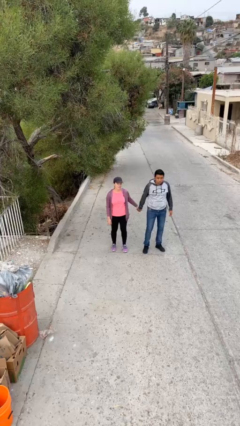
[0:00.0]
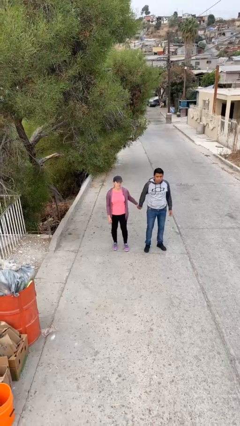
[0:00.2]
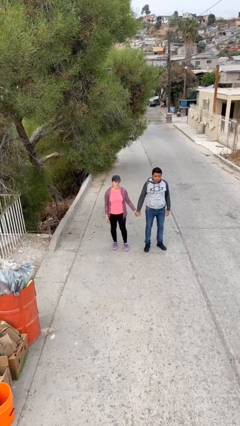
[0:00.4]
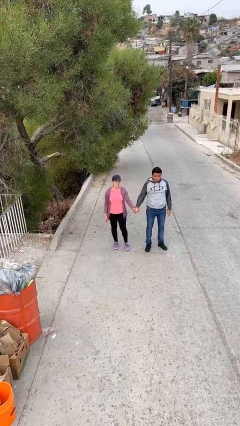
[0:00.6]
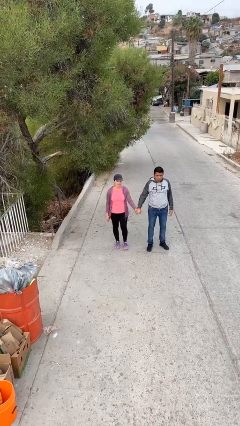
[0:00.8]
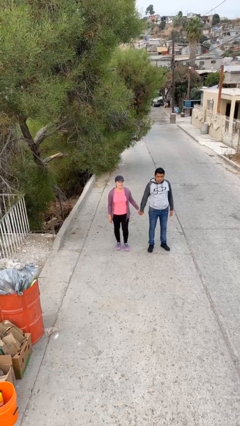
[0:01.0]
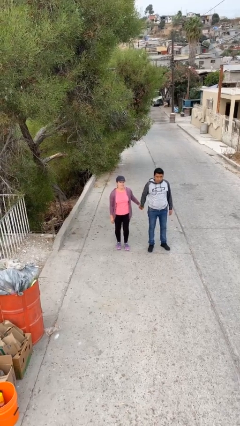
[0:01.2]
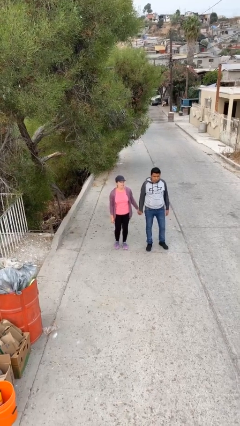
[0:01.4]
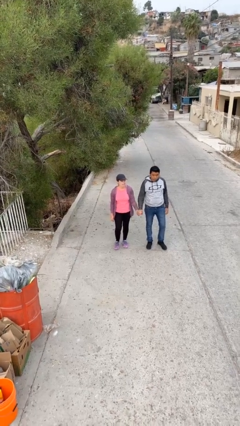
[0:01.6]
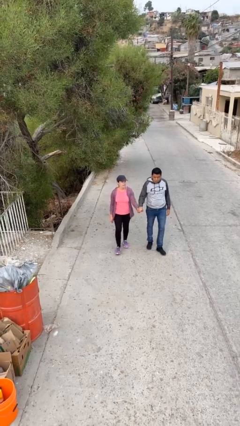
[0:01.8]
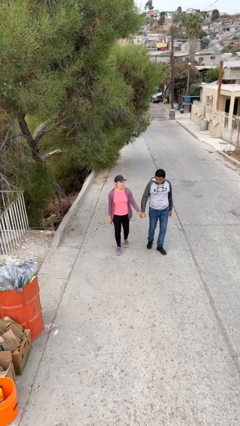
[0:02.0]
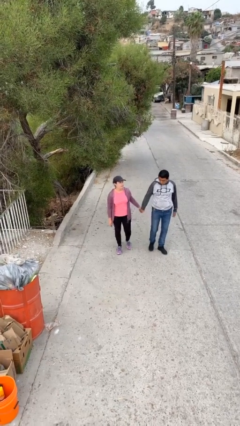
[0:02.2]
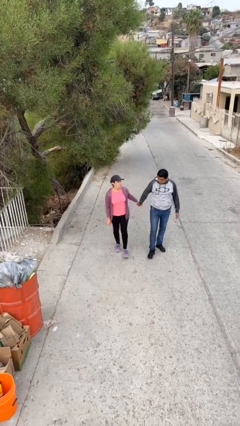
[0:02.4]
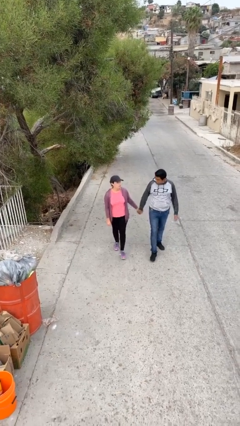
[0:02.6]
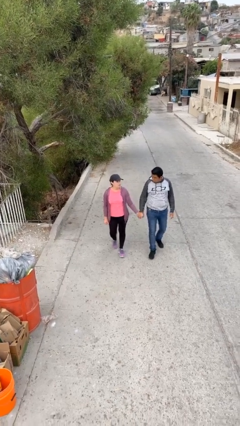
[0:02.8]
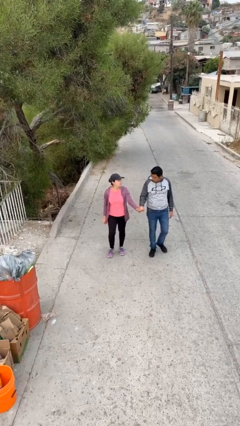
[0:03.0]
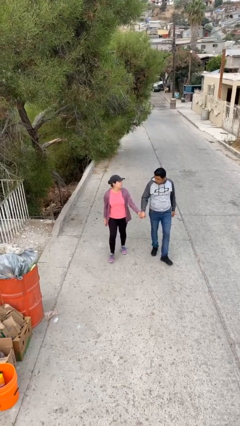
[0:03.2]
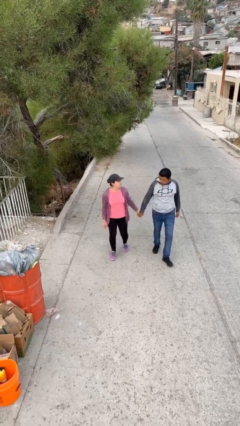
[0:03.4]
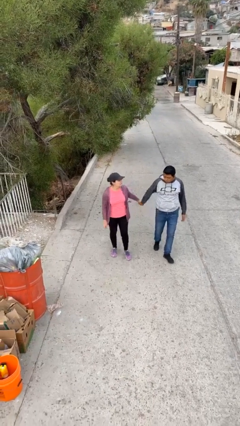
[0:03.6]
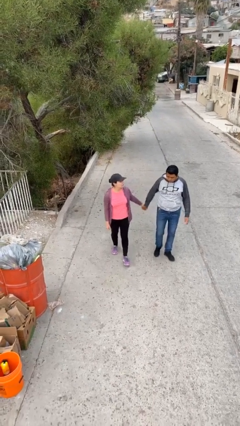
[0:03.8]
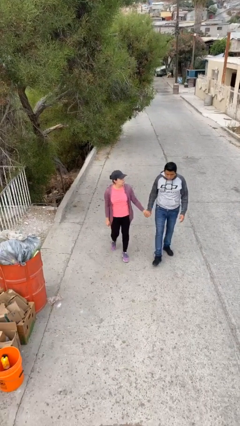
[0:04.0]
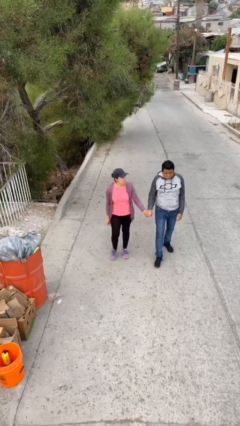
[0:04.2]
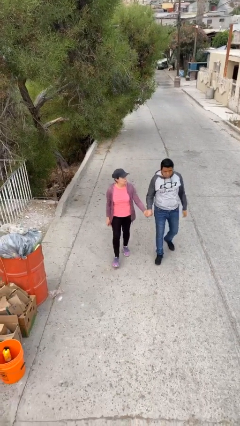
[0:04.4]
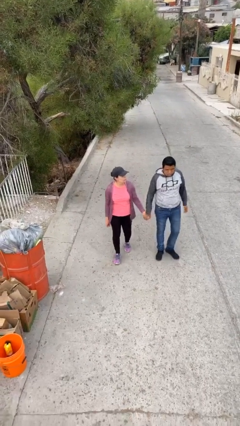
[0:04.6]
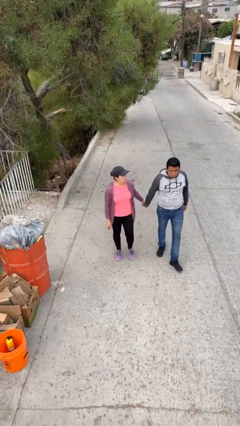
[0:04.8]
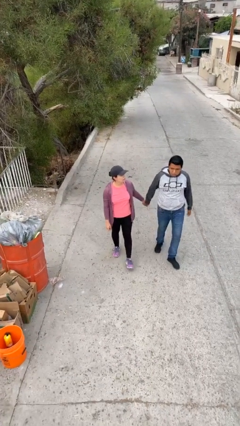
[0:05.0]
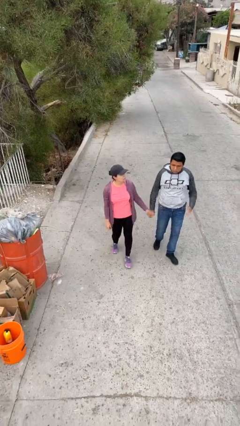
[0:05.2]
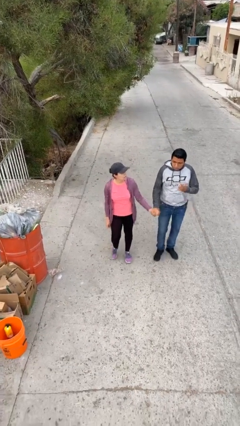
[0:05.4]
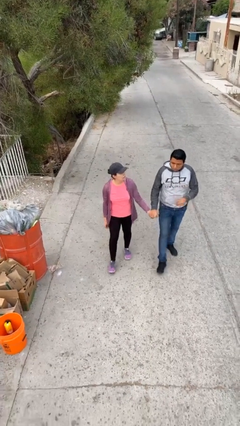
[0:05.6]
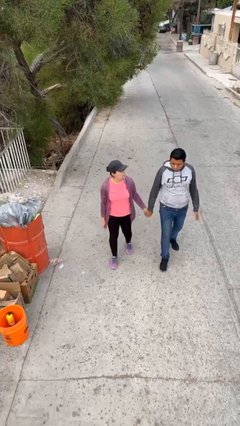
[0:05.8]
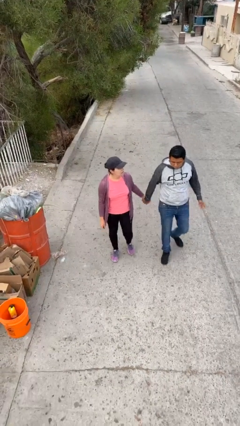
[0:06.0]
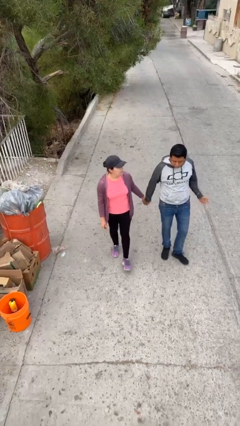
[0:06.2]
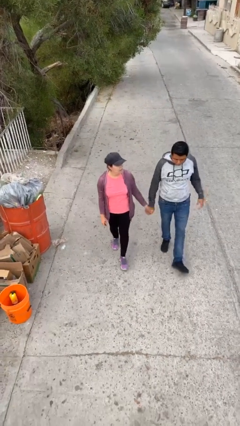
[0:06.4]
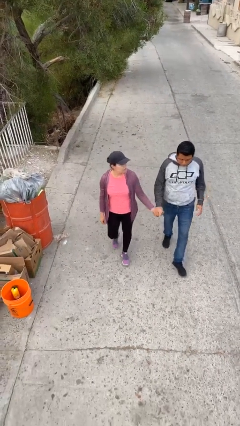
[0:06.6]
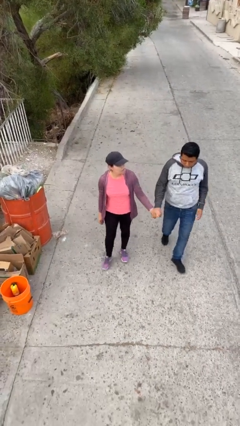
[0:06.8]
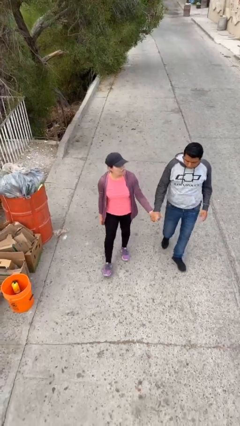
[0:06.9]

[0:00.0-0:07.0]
person holds hand

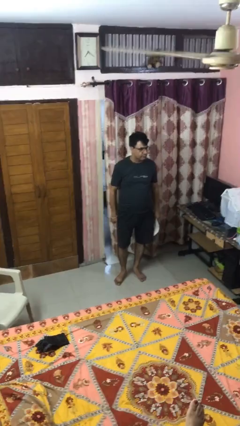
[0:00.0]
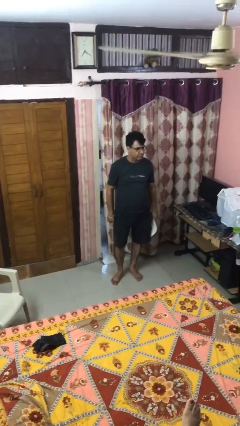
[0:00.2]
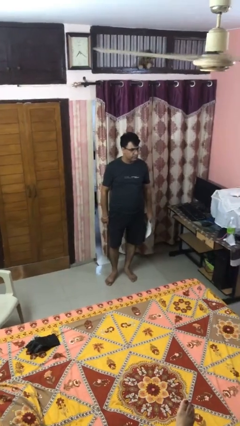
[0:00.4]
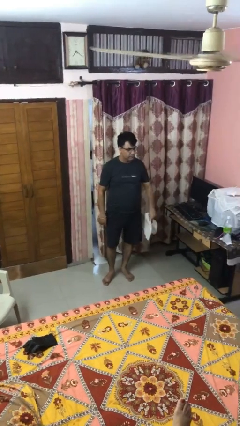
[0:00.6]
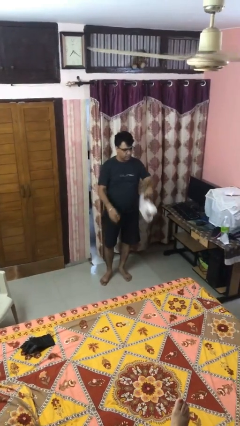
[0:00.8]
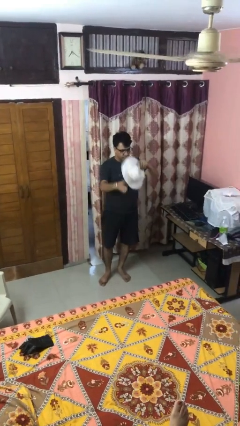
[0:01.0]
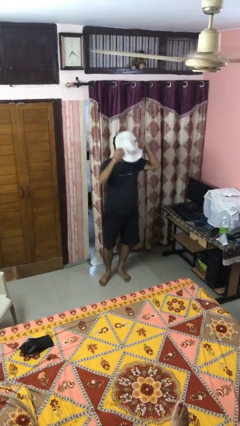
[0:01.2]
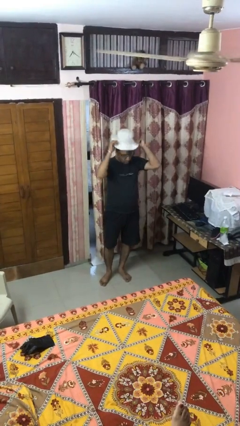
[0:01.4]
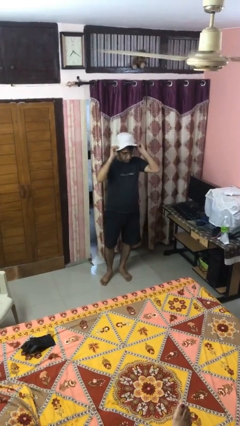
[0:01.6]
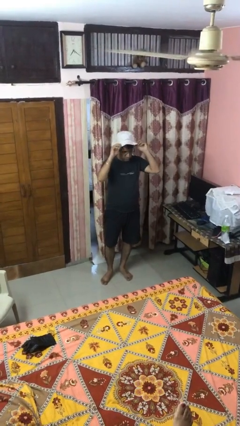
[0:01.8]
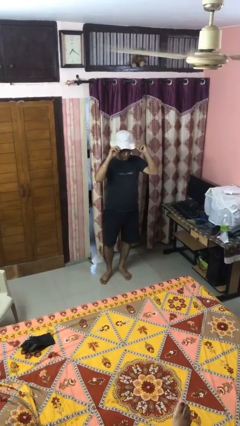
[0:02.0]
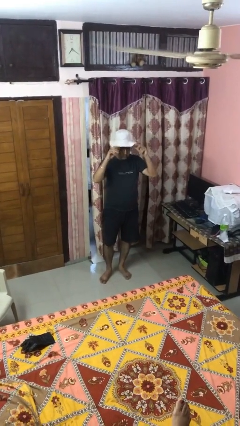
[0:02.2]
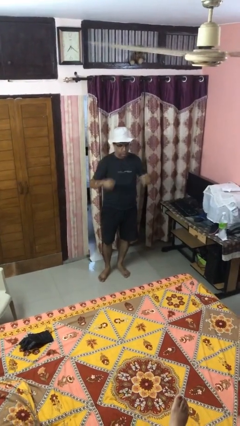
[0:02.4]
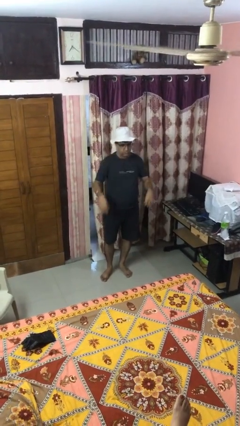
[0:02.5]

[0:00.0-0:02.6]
person puts on hat

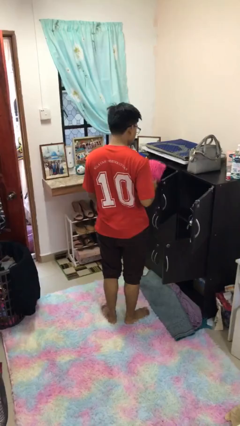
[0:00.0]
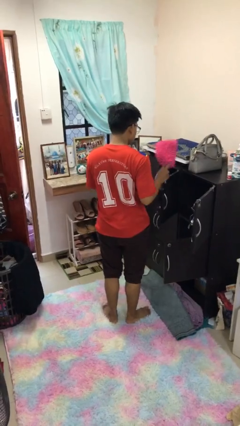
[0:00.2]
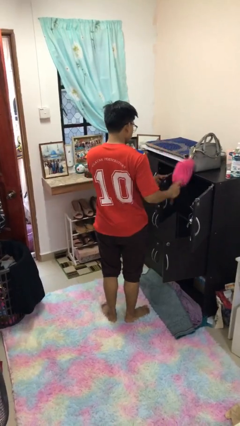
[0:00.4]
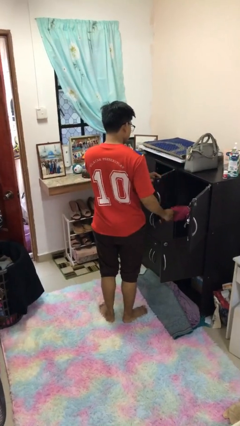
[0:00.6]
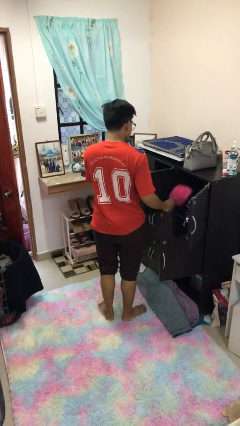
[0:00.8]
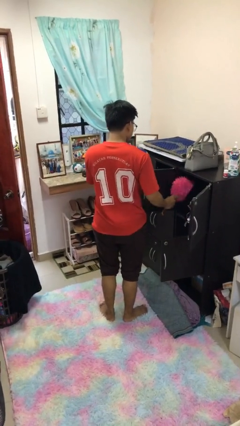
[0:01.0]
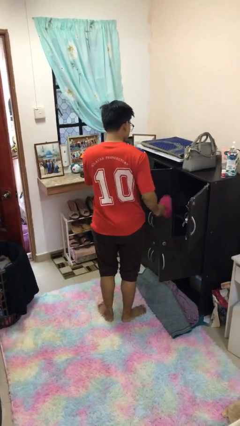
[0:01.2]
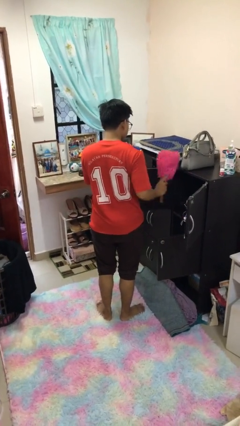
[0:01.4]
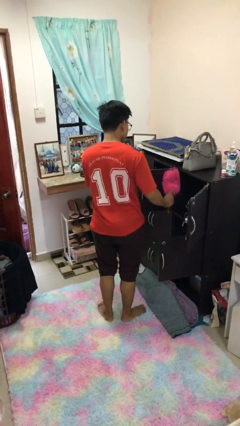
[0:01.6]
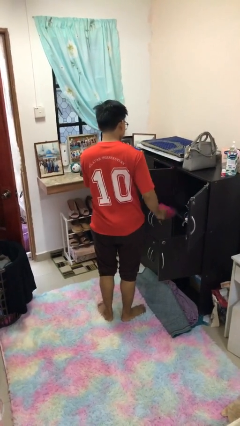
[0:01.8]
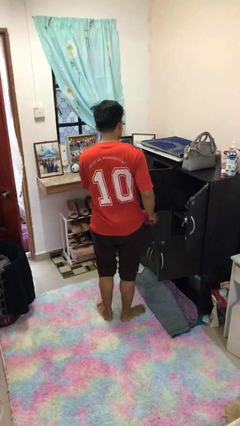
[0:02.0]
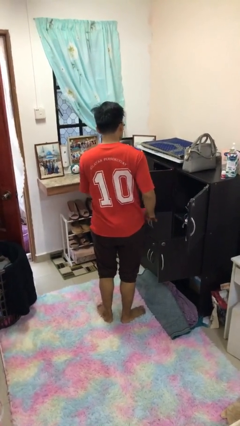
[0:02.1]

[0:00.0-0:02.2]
person dusts furniture

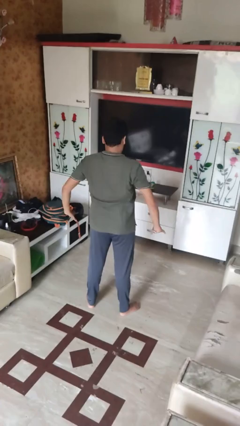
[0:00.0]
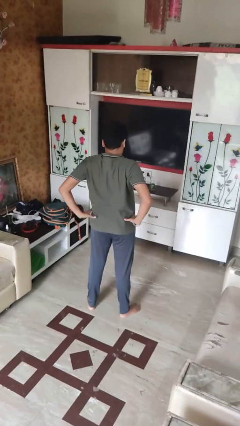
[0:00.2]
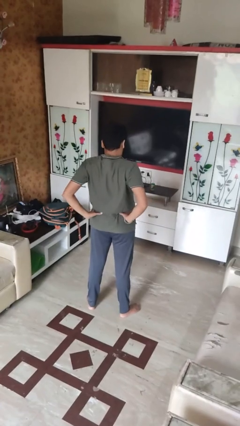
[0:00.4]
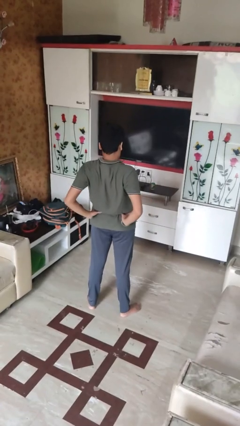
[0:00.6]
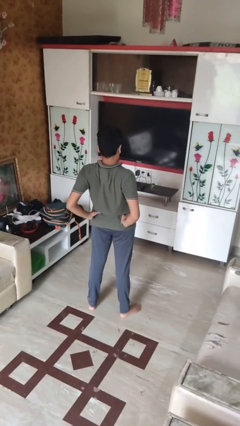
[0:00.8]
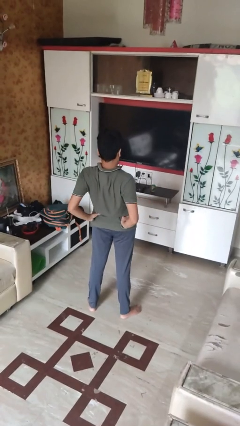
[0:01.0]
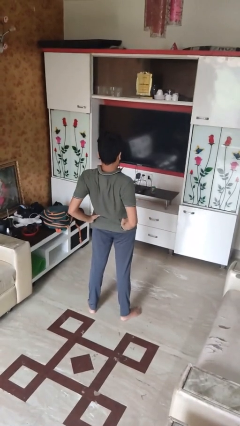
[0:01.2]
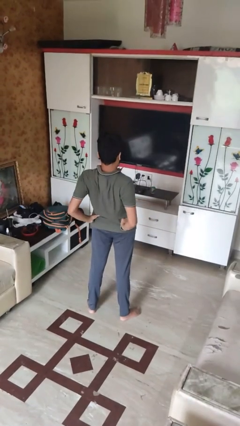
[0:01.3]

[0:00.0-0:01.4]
person stretches back

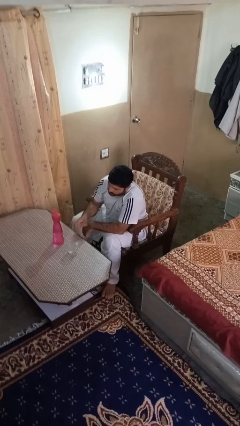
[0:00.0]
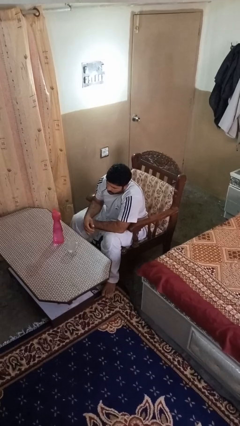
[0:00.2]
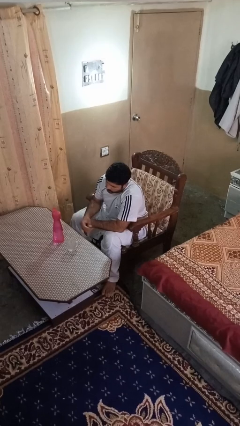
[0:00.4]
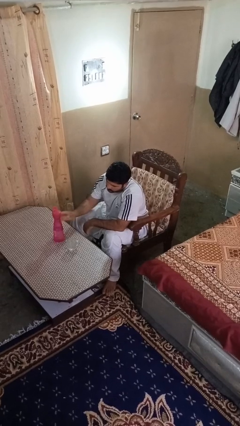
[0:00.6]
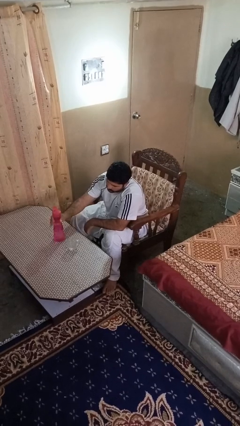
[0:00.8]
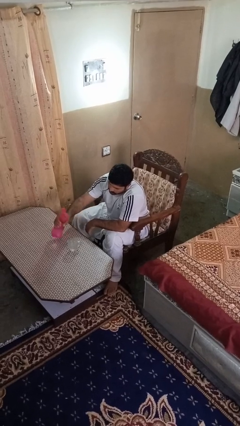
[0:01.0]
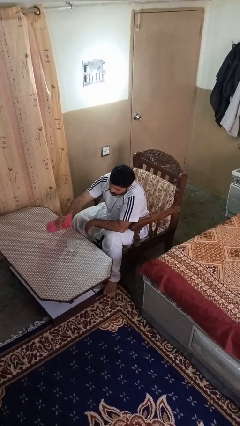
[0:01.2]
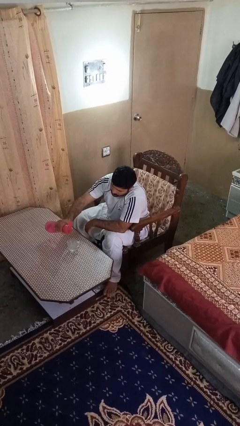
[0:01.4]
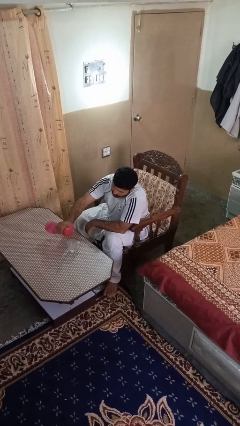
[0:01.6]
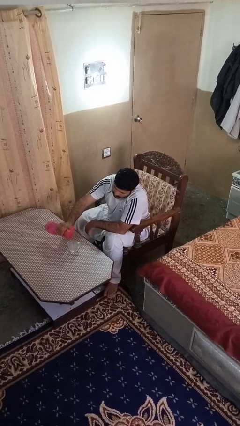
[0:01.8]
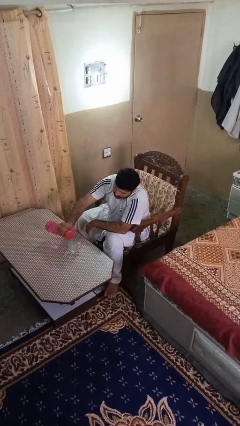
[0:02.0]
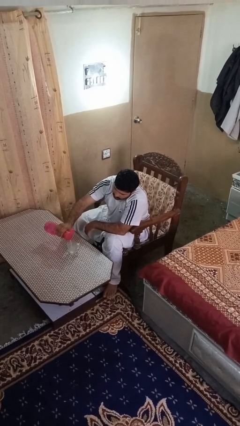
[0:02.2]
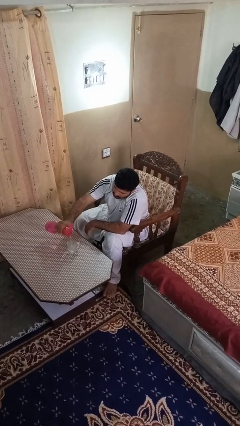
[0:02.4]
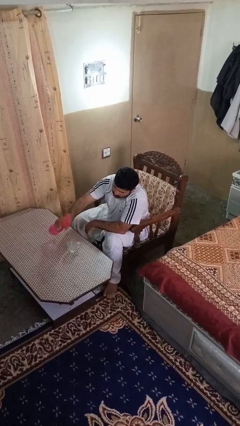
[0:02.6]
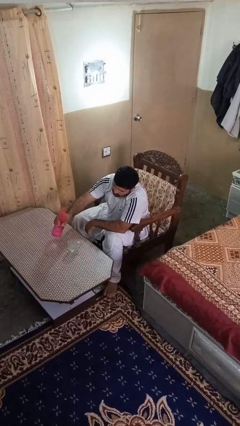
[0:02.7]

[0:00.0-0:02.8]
person pours liquid into cup

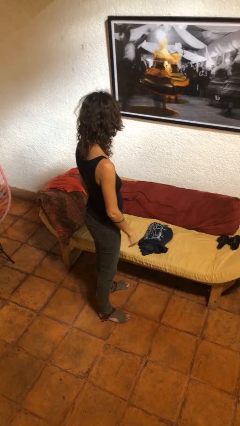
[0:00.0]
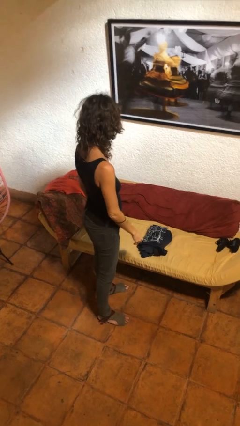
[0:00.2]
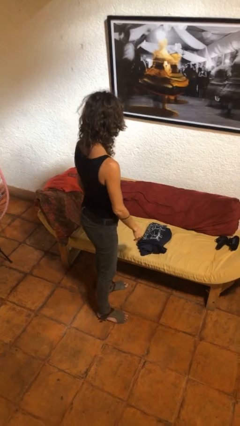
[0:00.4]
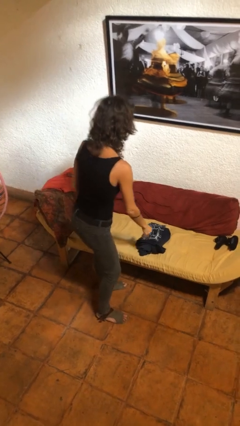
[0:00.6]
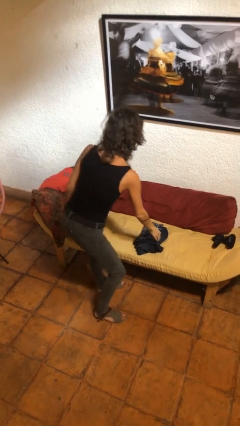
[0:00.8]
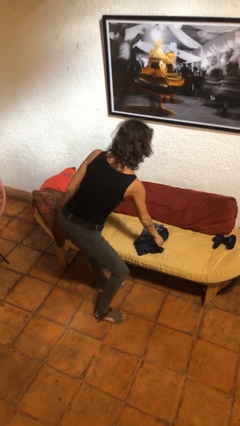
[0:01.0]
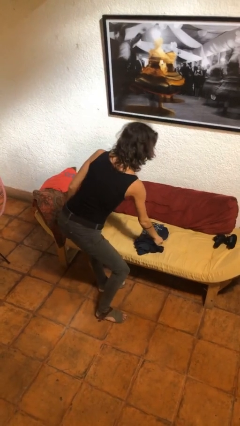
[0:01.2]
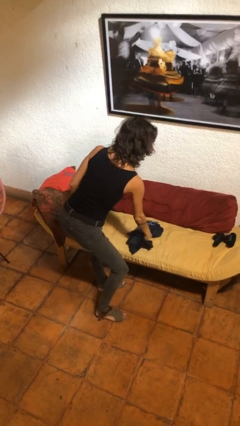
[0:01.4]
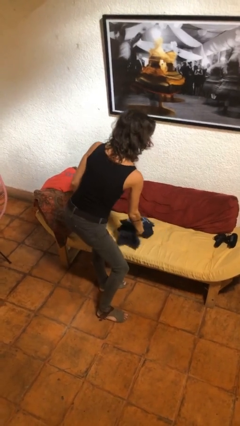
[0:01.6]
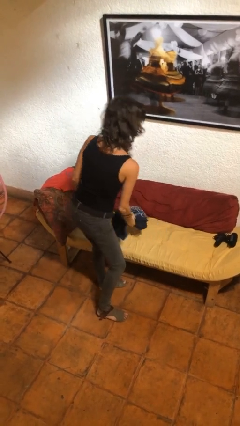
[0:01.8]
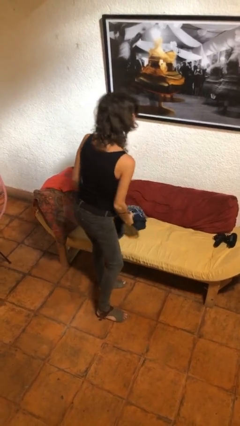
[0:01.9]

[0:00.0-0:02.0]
person picks up object from couch
